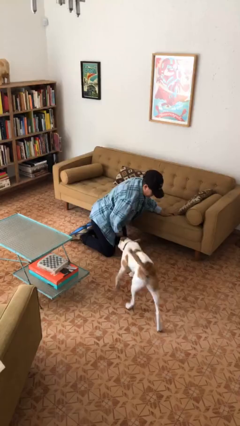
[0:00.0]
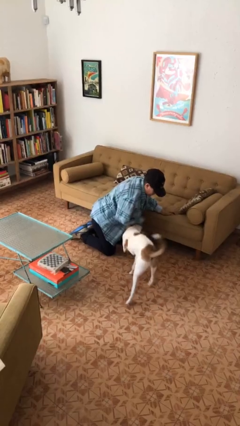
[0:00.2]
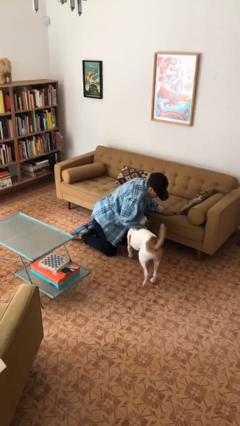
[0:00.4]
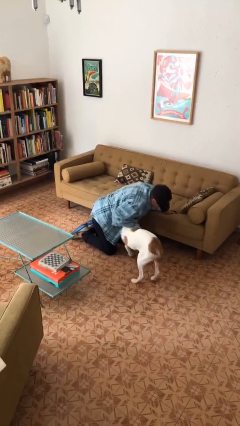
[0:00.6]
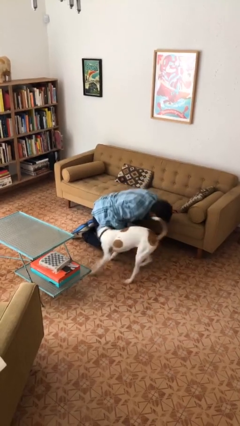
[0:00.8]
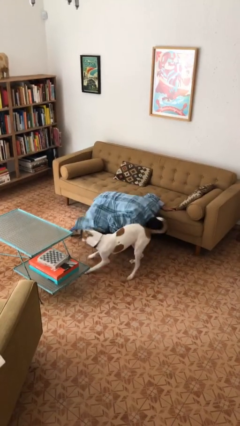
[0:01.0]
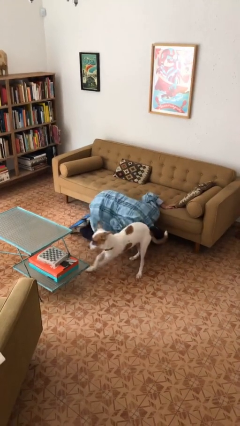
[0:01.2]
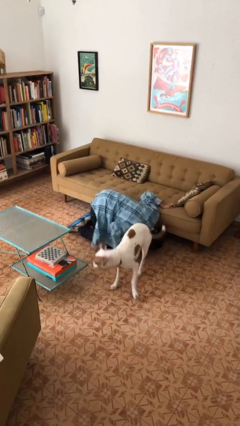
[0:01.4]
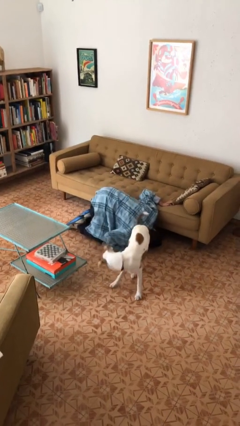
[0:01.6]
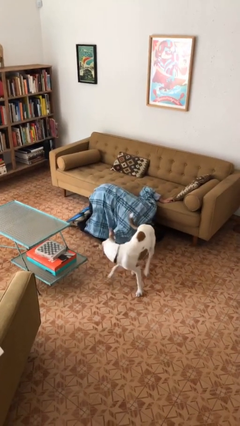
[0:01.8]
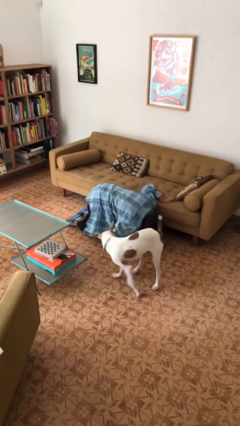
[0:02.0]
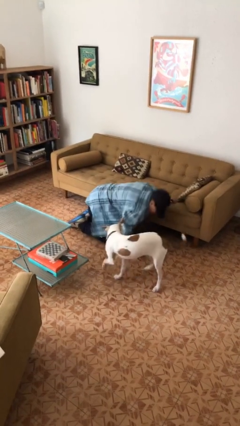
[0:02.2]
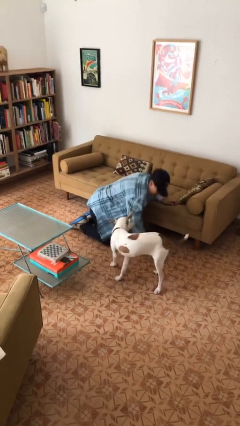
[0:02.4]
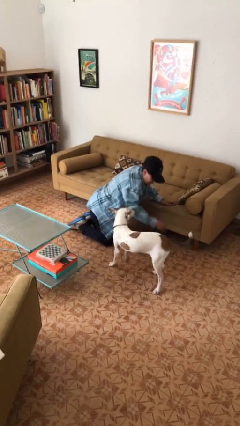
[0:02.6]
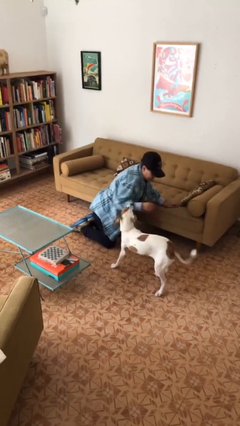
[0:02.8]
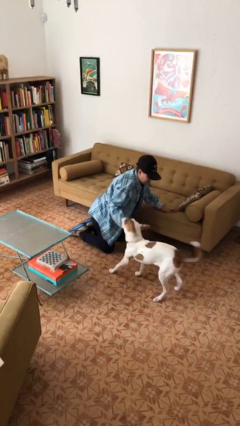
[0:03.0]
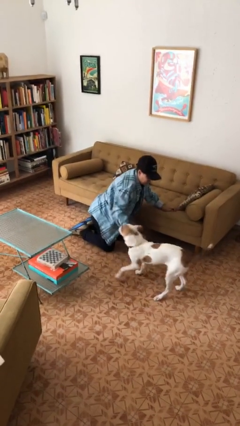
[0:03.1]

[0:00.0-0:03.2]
person searches under couch

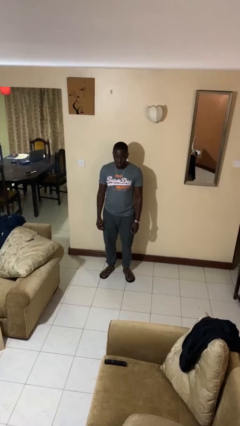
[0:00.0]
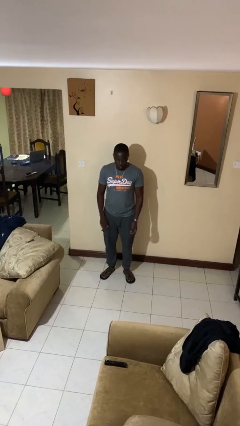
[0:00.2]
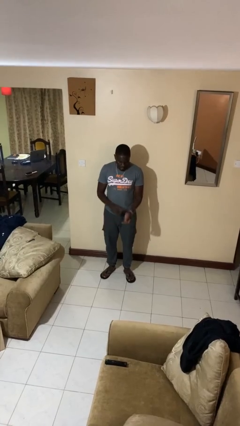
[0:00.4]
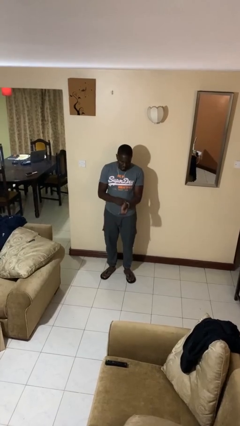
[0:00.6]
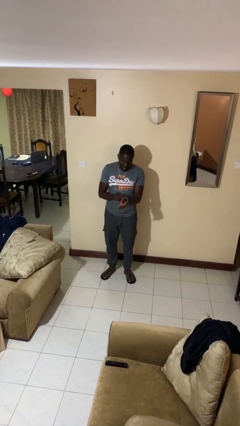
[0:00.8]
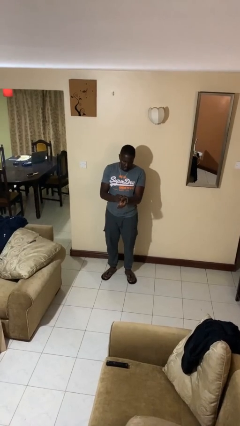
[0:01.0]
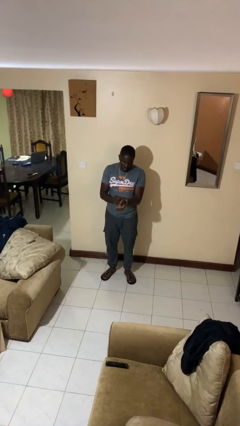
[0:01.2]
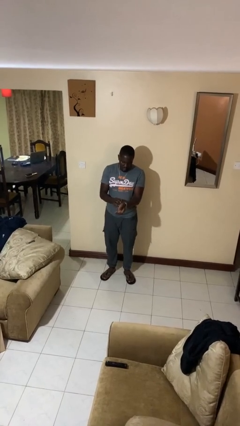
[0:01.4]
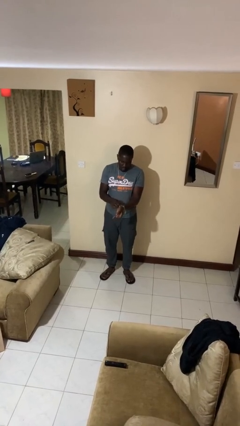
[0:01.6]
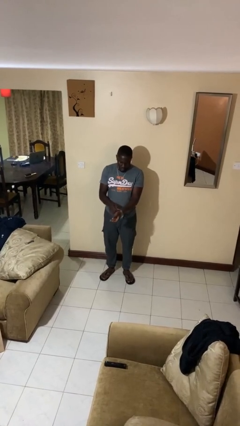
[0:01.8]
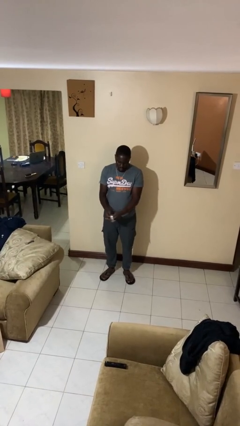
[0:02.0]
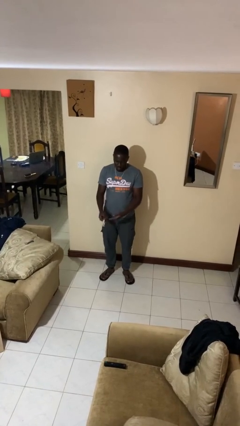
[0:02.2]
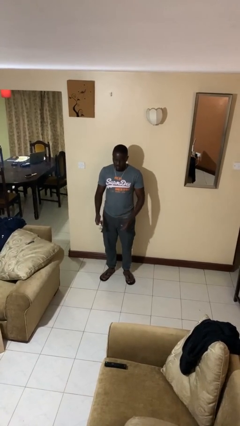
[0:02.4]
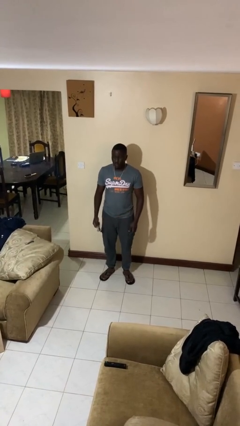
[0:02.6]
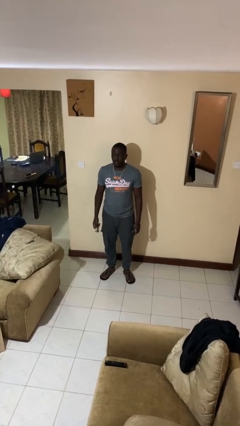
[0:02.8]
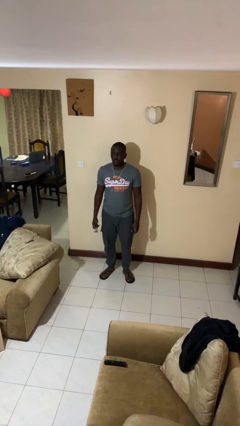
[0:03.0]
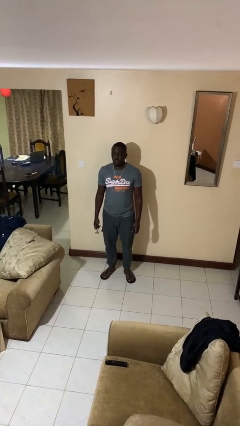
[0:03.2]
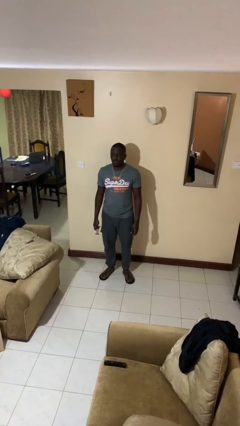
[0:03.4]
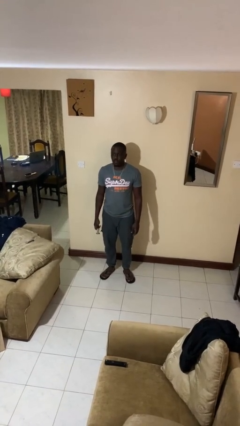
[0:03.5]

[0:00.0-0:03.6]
person takes off wristwatch

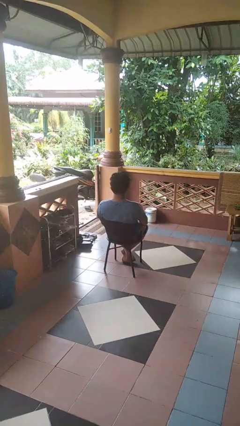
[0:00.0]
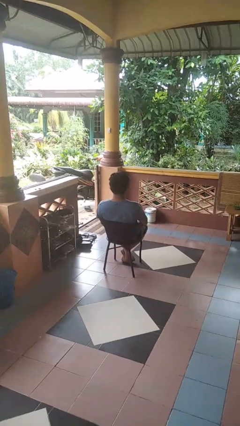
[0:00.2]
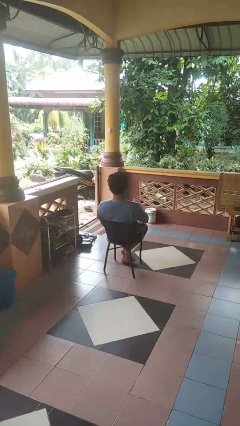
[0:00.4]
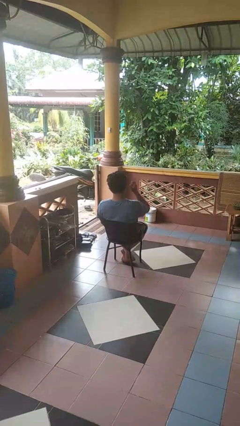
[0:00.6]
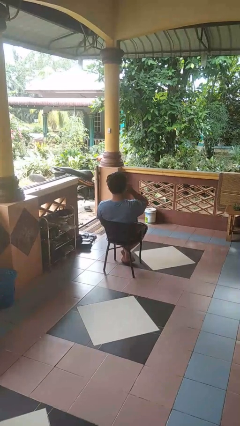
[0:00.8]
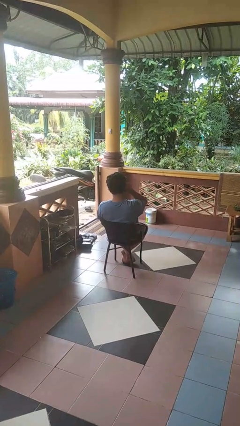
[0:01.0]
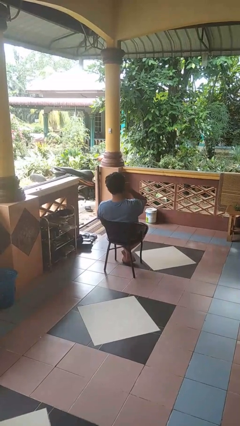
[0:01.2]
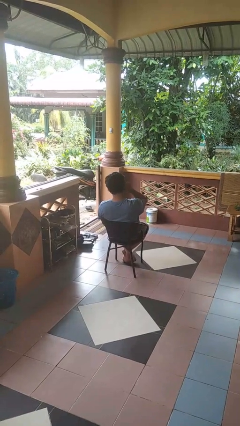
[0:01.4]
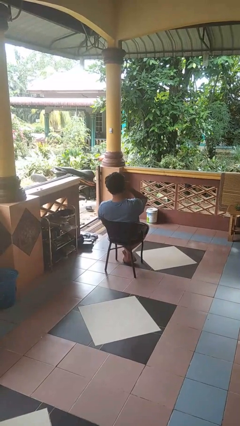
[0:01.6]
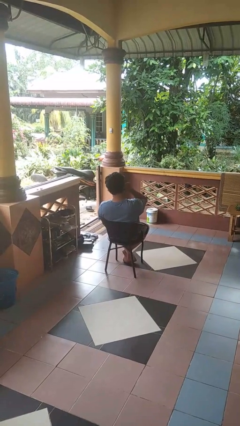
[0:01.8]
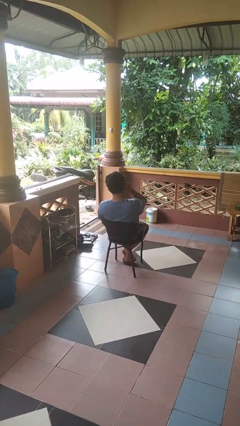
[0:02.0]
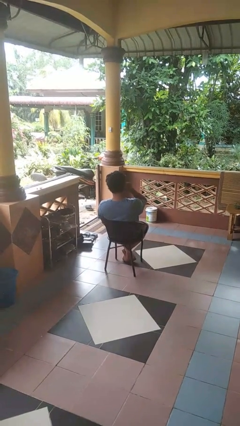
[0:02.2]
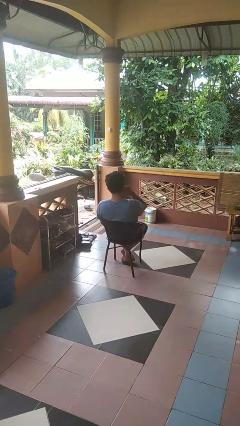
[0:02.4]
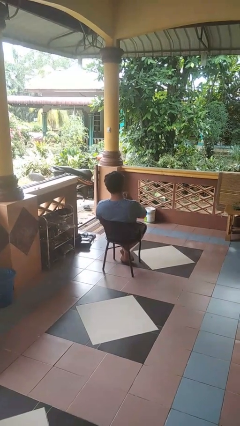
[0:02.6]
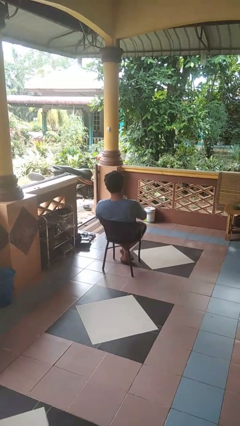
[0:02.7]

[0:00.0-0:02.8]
person touches earlobe

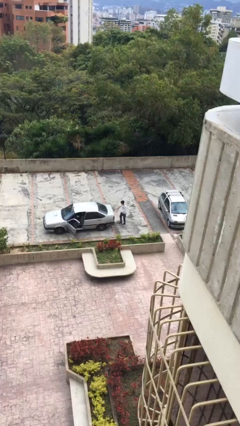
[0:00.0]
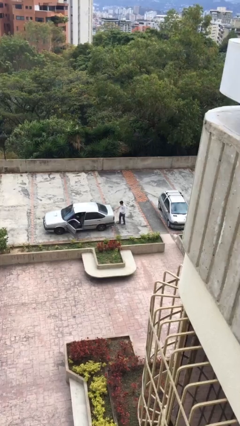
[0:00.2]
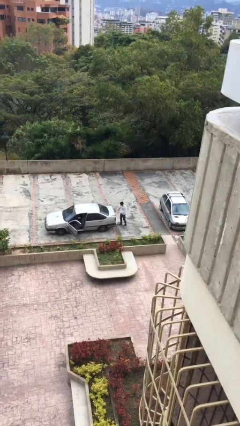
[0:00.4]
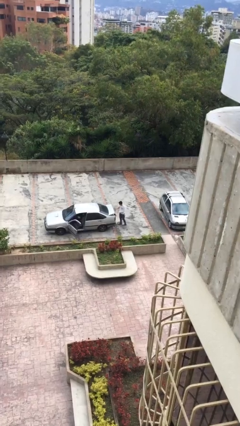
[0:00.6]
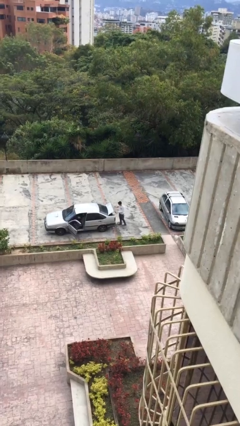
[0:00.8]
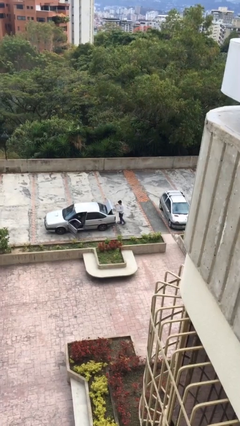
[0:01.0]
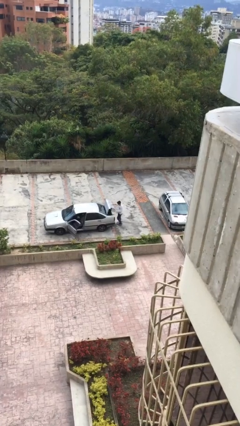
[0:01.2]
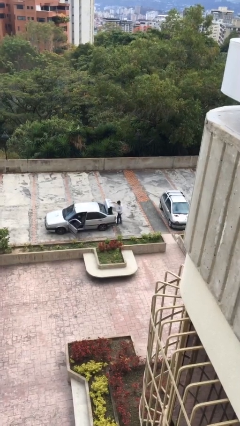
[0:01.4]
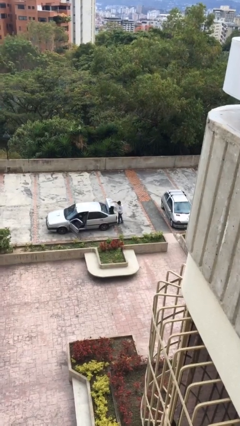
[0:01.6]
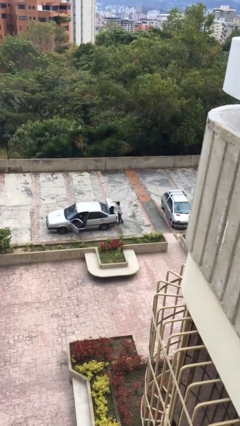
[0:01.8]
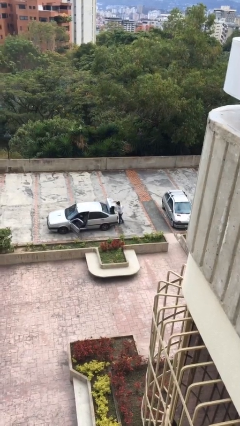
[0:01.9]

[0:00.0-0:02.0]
person opens car trunk

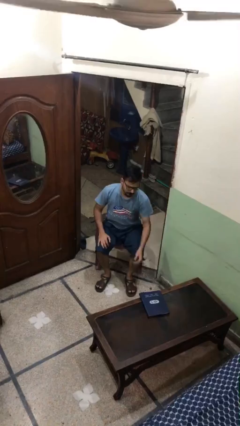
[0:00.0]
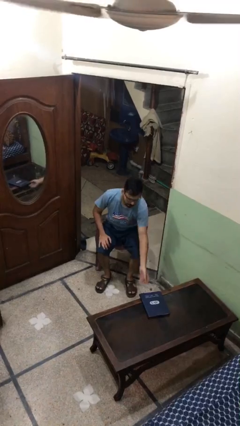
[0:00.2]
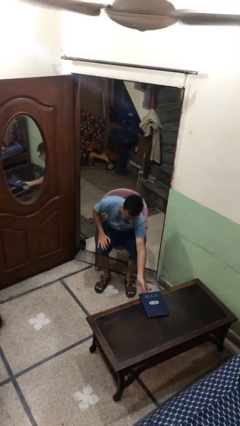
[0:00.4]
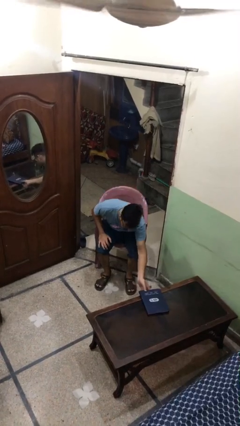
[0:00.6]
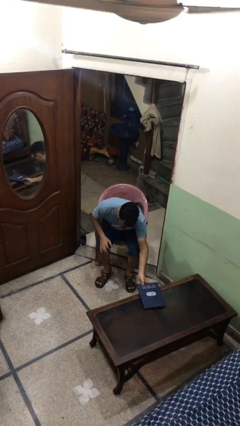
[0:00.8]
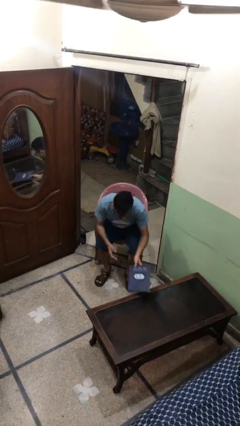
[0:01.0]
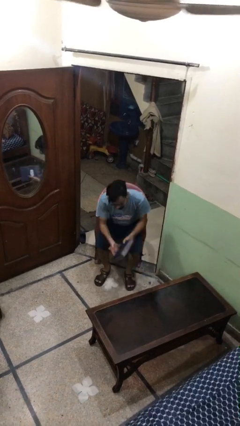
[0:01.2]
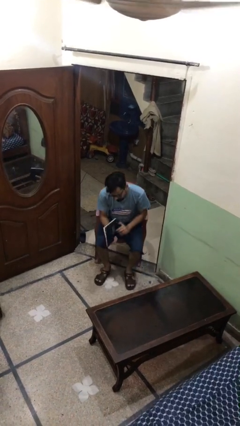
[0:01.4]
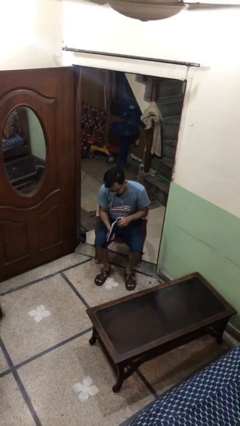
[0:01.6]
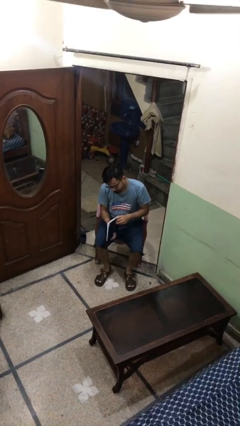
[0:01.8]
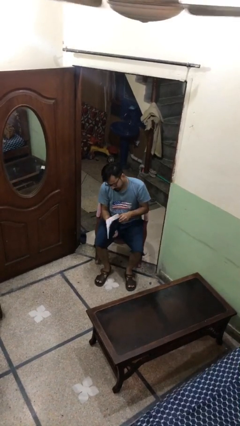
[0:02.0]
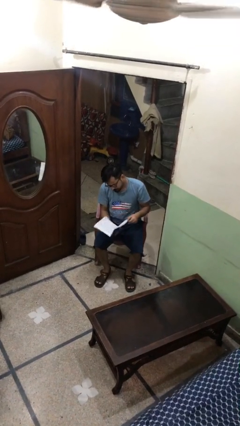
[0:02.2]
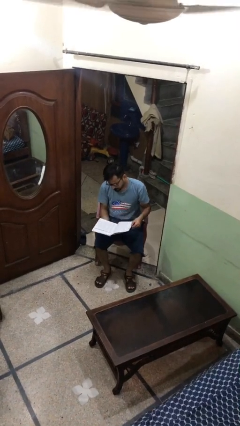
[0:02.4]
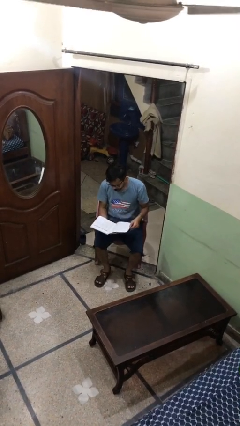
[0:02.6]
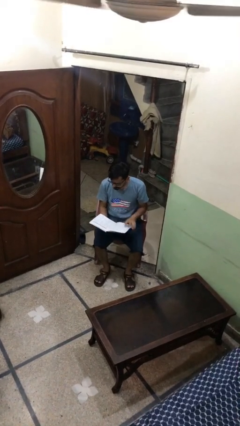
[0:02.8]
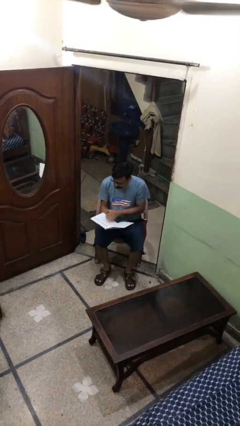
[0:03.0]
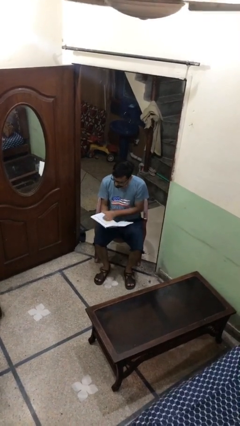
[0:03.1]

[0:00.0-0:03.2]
person reads document

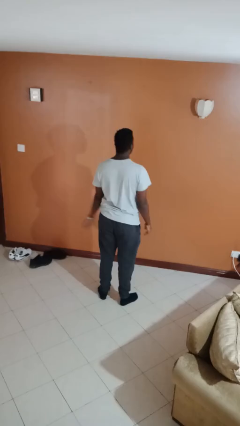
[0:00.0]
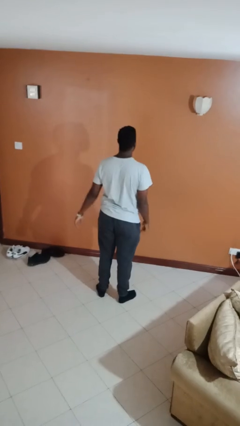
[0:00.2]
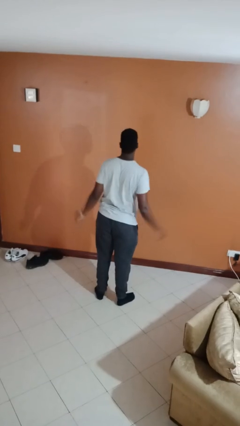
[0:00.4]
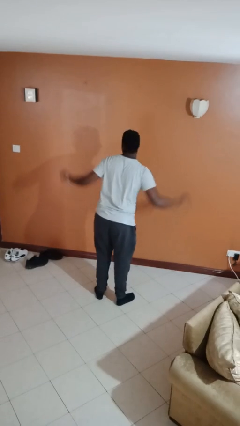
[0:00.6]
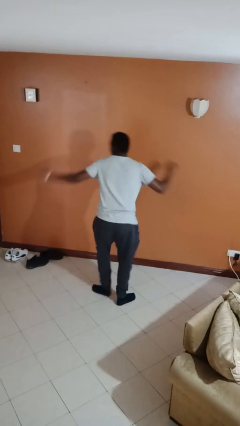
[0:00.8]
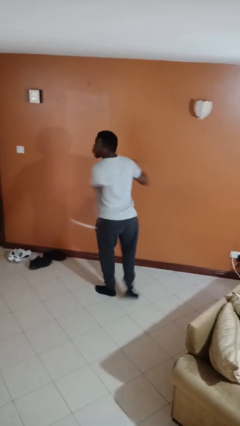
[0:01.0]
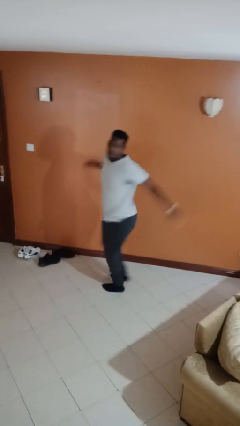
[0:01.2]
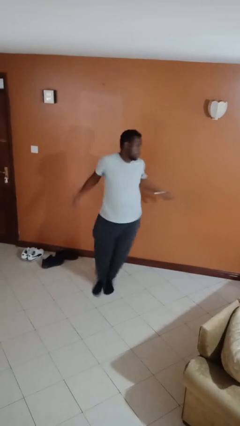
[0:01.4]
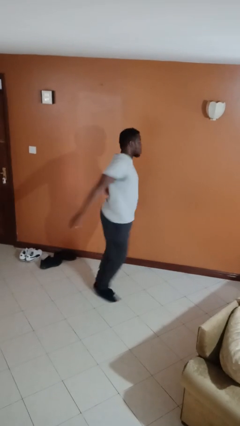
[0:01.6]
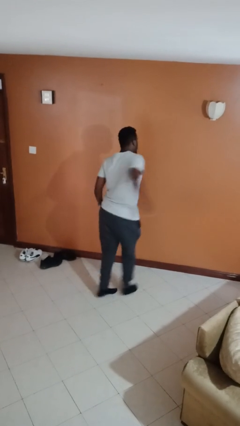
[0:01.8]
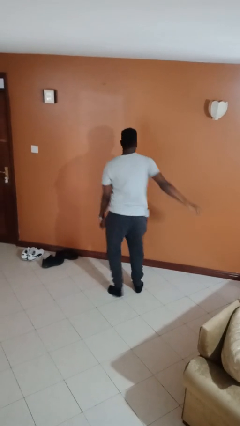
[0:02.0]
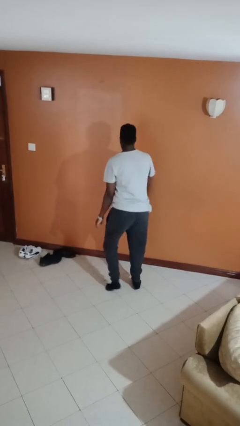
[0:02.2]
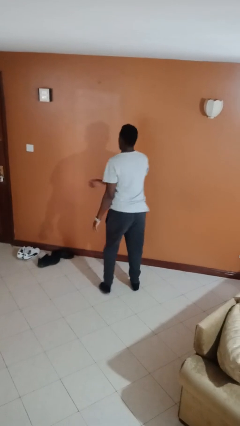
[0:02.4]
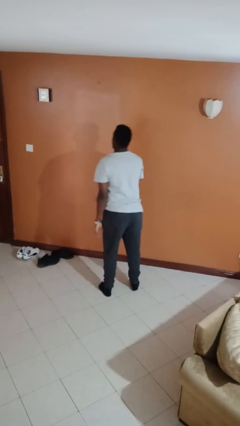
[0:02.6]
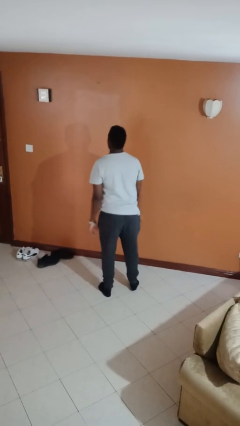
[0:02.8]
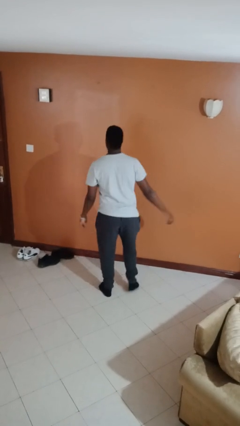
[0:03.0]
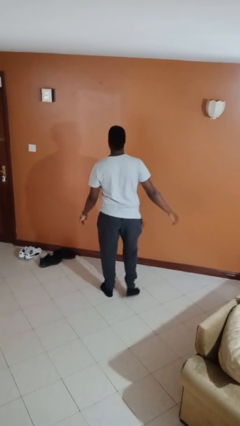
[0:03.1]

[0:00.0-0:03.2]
person twirls
